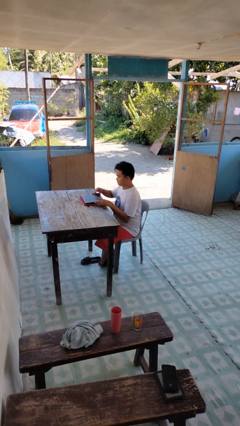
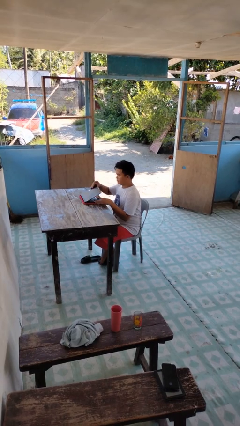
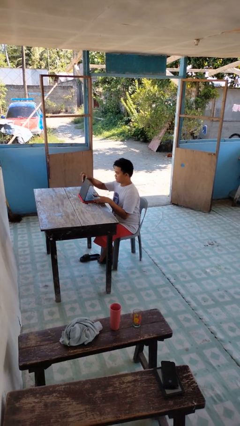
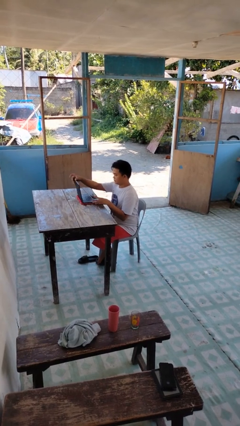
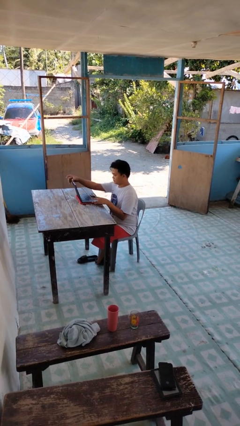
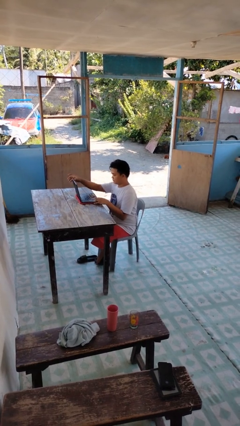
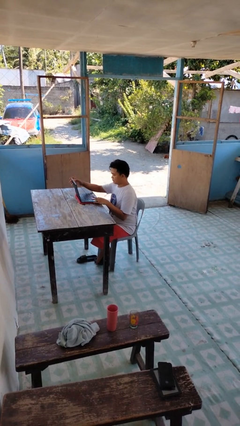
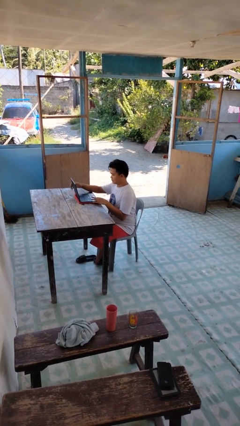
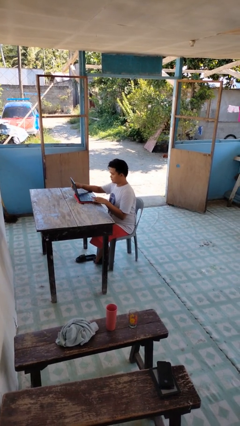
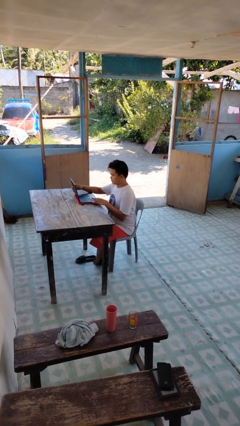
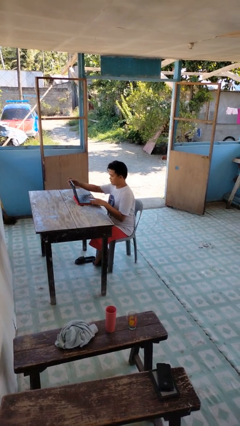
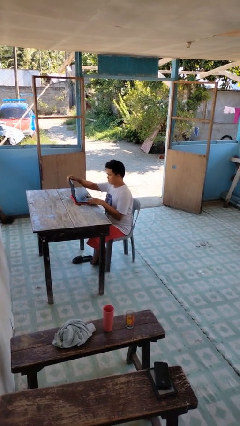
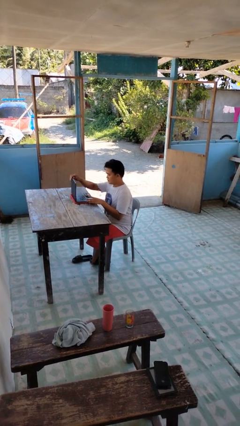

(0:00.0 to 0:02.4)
person opens laptop

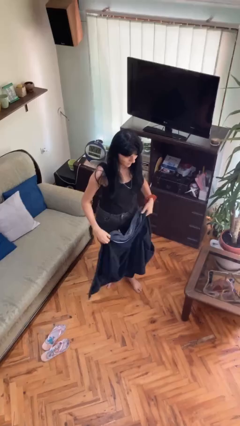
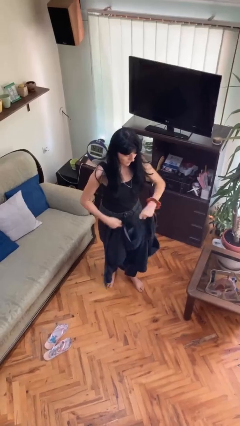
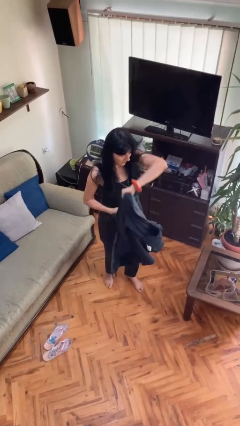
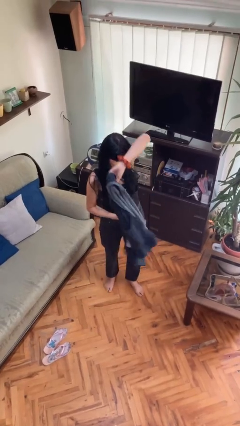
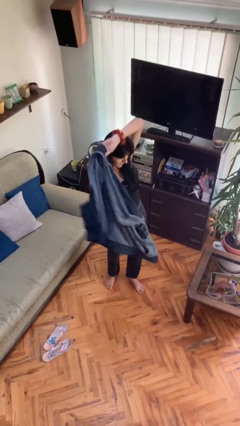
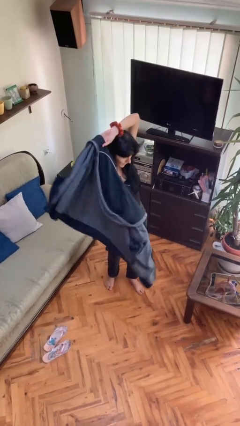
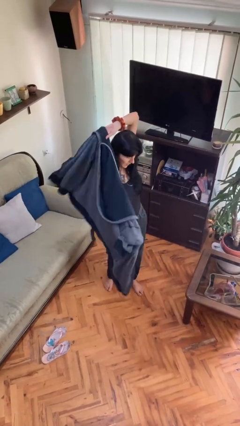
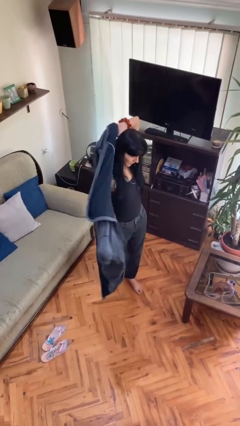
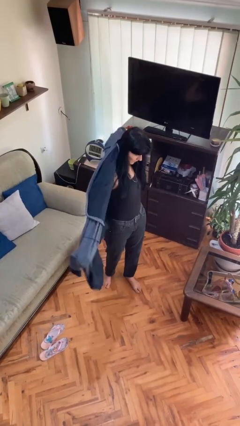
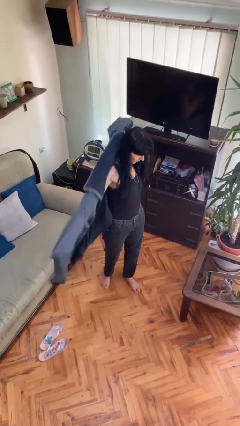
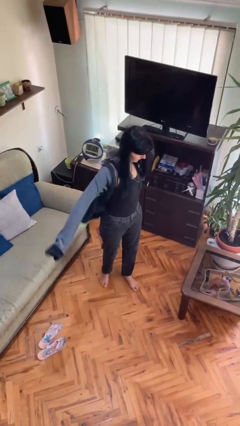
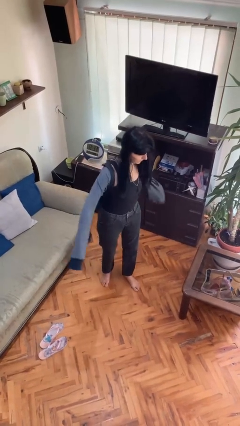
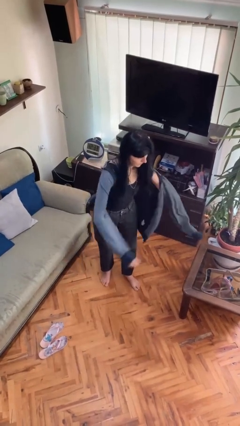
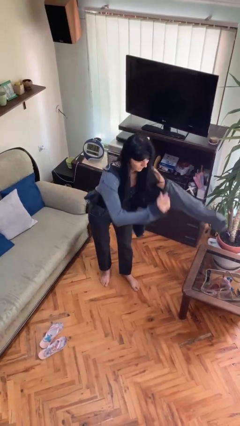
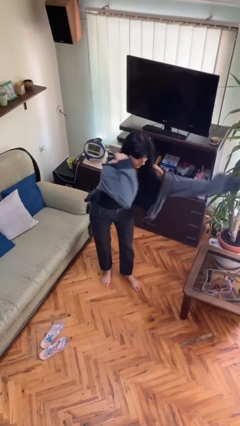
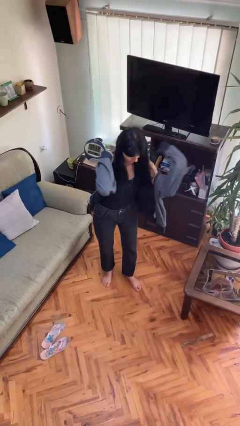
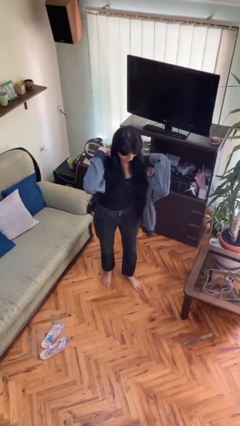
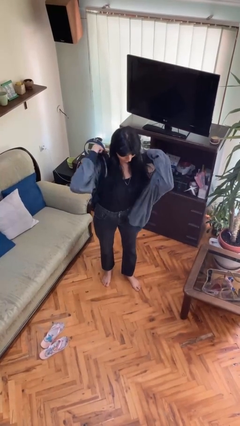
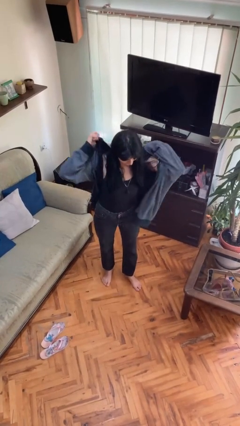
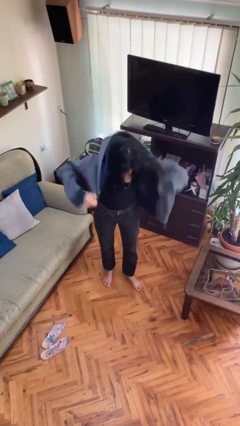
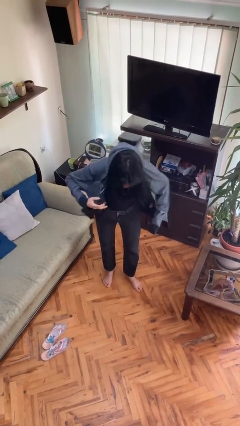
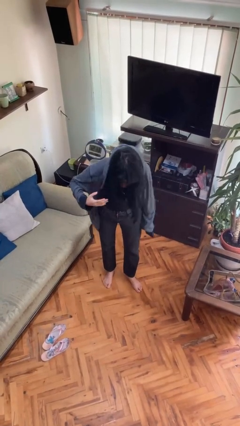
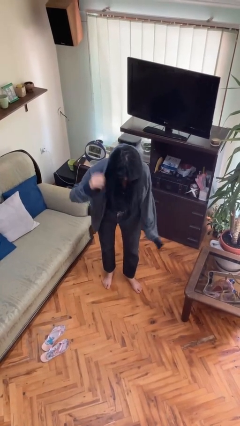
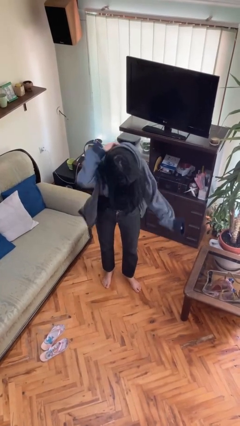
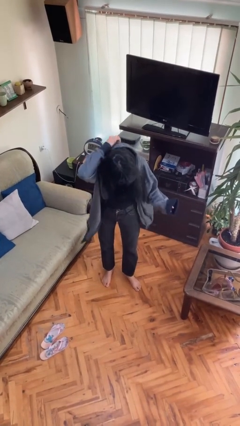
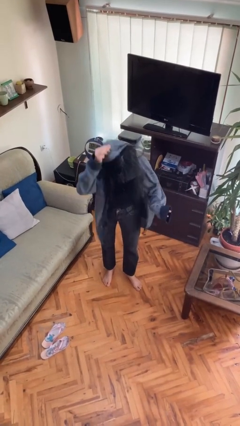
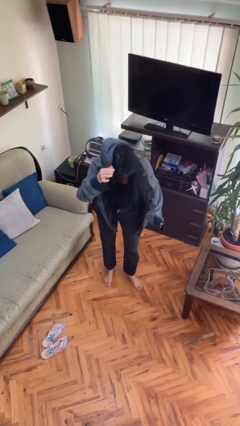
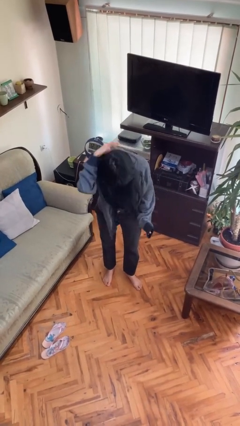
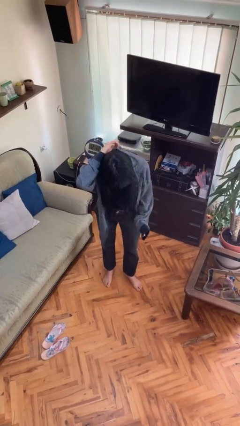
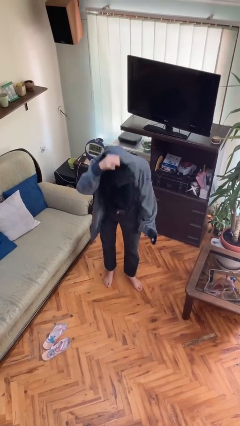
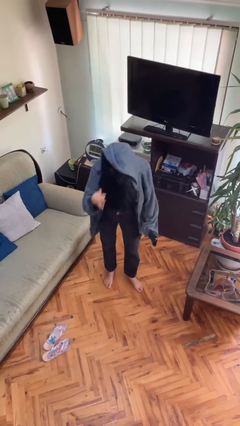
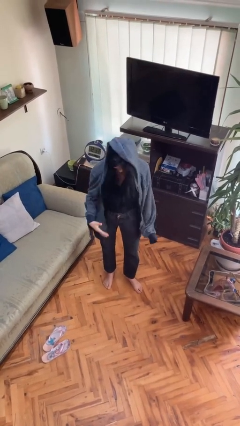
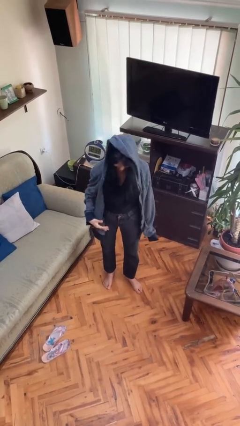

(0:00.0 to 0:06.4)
person puts on hoodie

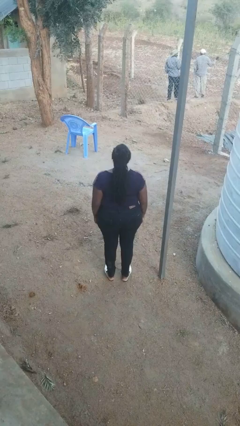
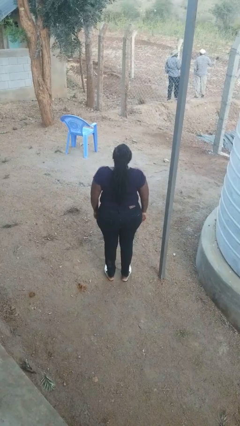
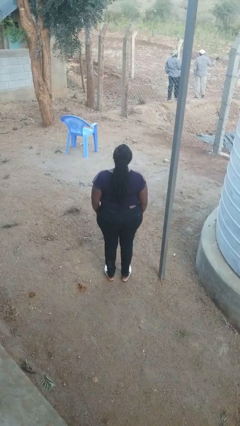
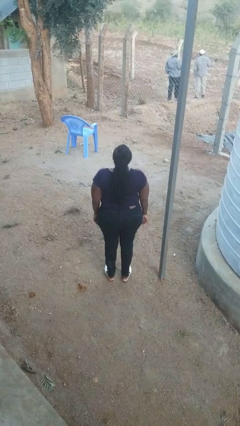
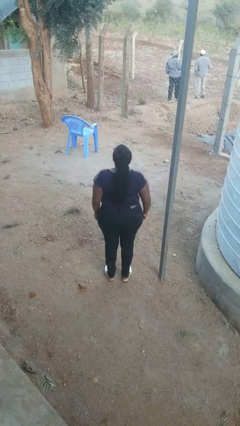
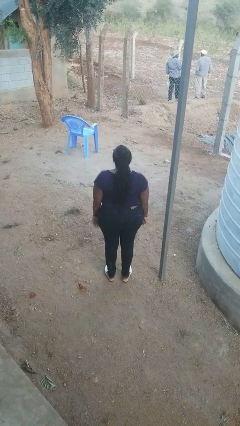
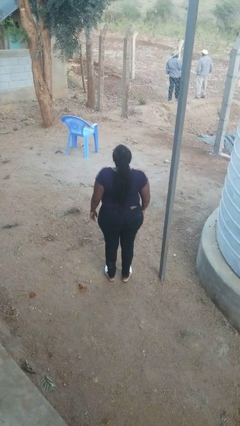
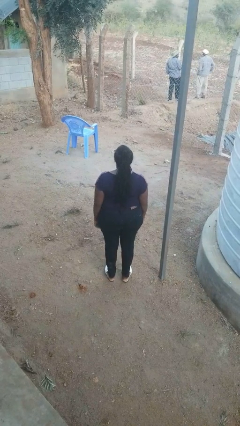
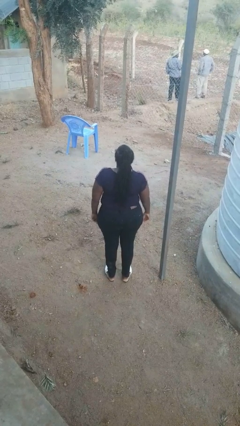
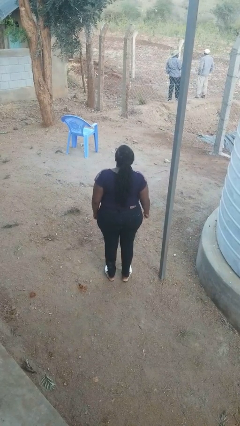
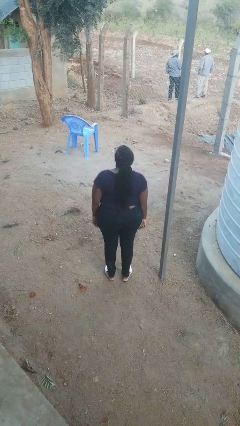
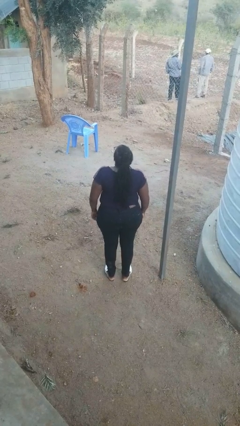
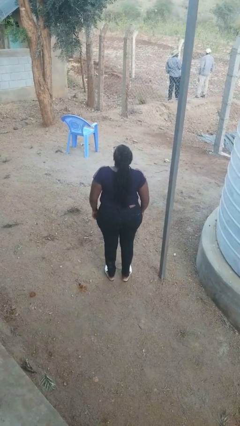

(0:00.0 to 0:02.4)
person shrugs

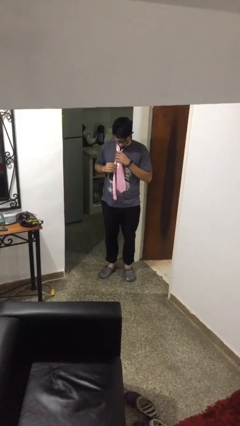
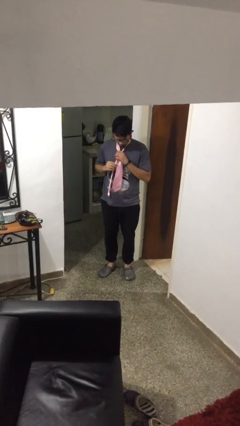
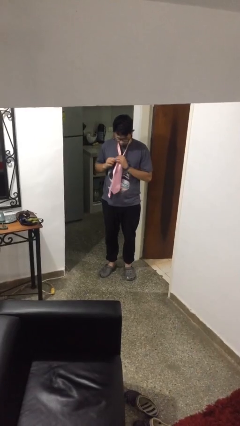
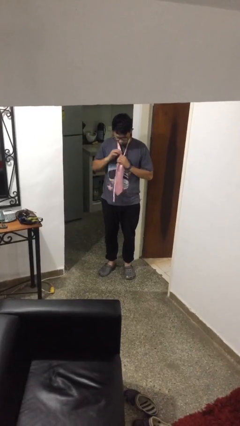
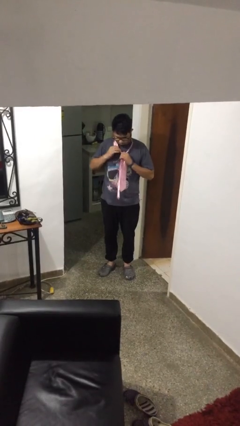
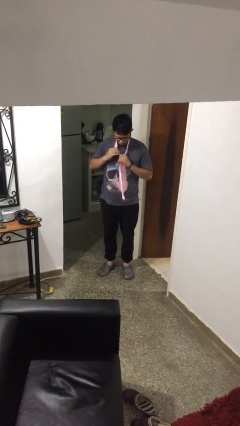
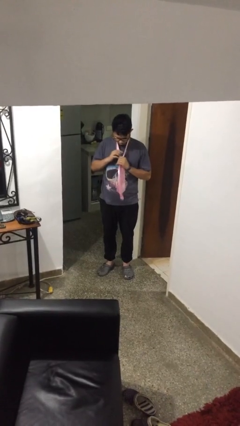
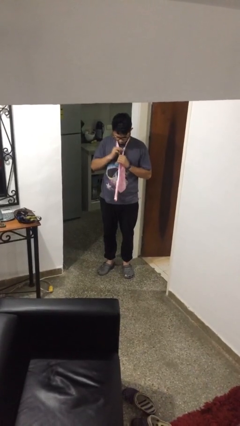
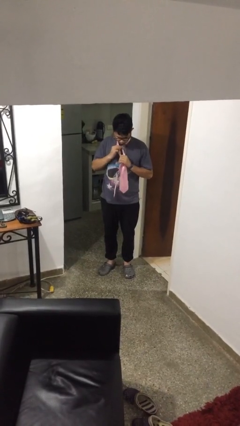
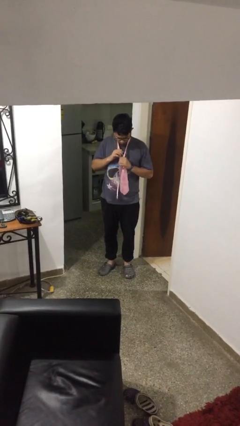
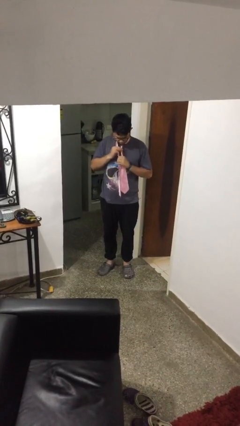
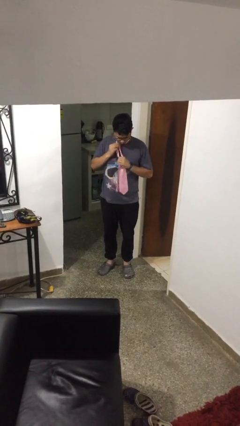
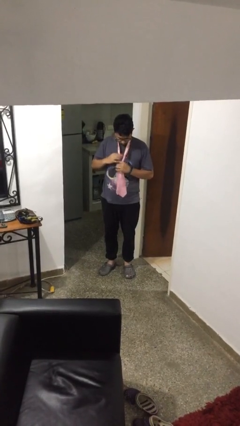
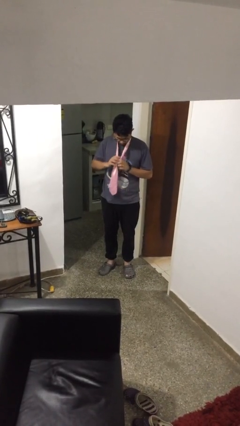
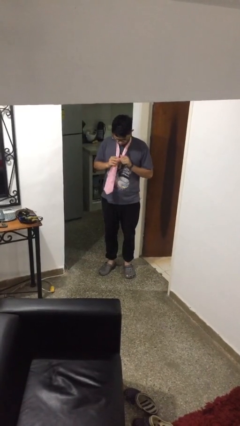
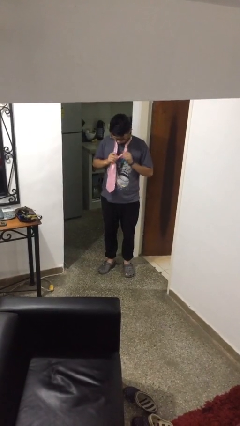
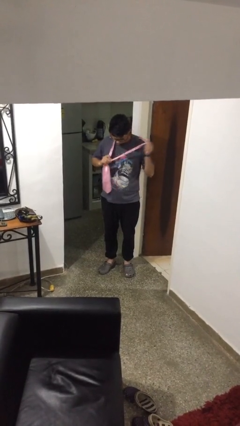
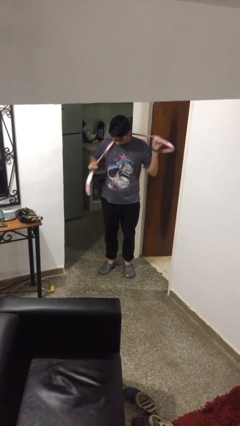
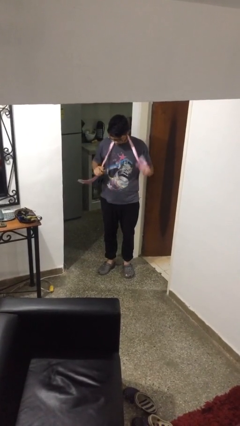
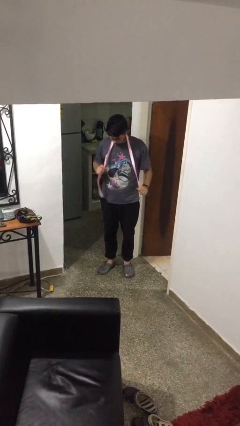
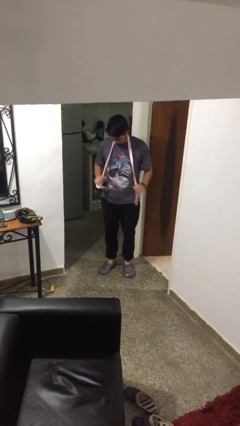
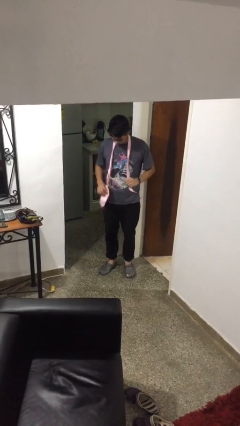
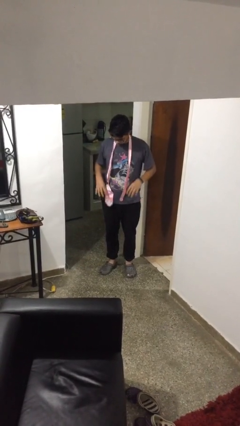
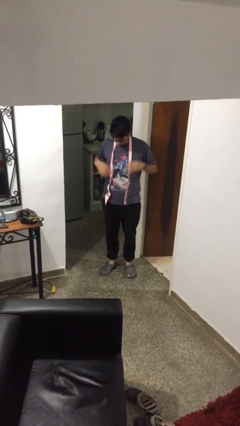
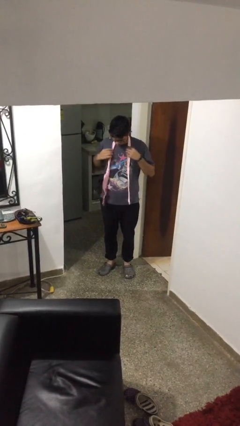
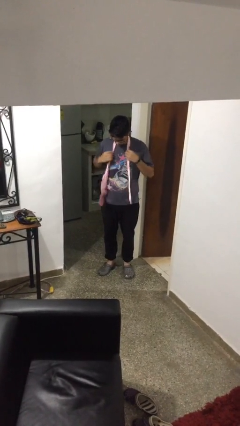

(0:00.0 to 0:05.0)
person takes off necktie

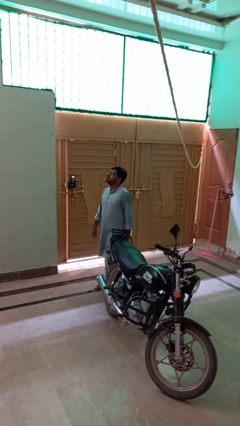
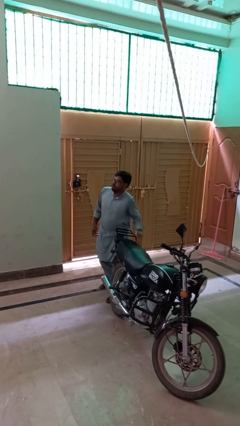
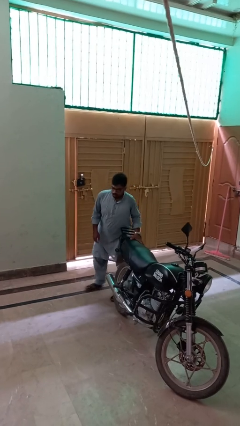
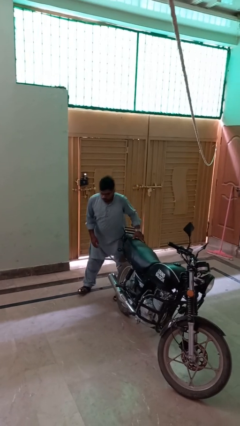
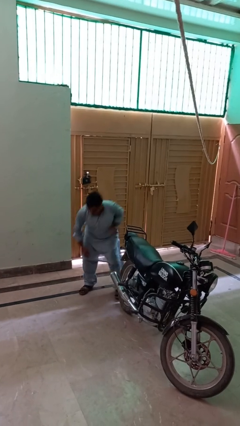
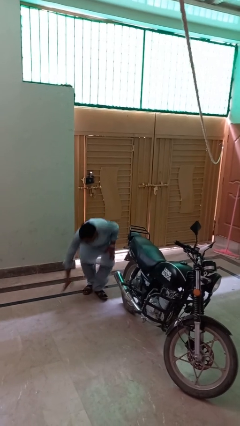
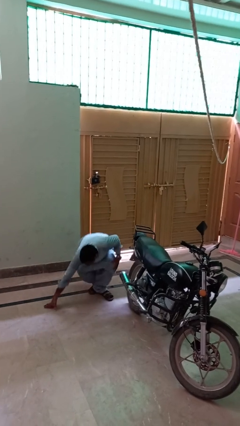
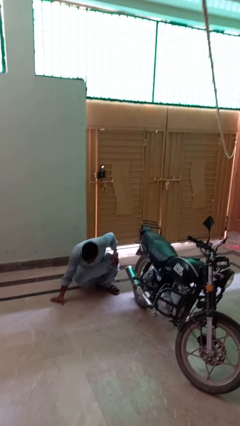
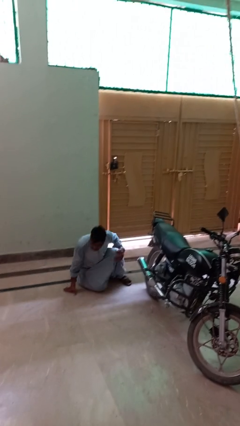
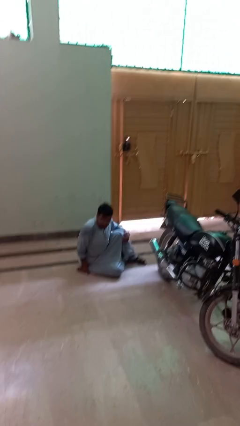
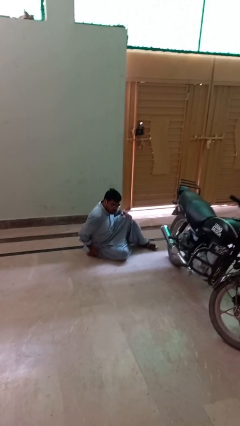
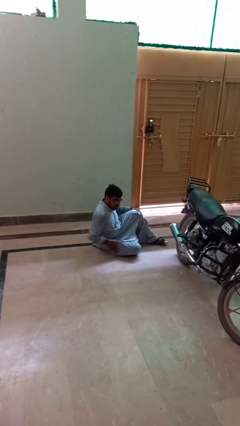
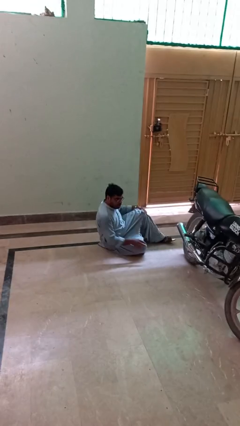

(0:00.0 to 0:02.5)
person trips on object on floor
